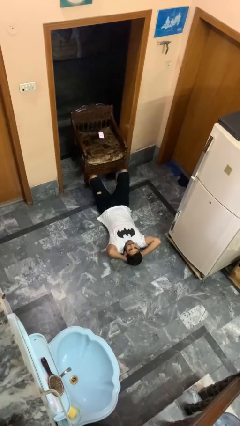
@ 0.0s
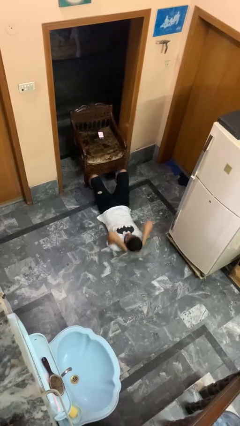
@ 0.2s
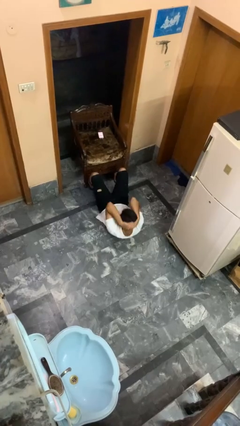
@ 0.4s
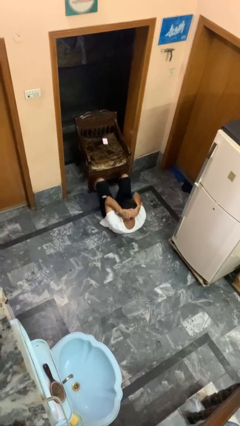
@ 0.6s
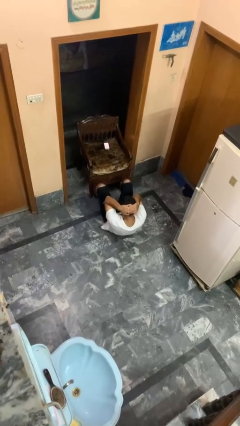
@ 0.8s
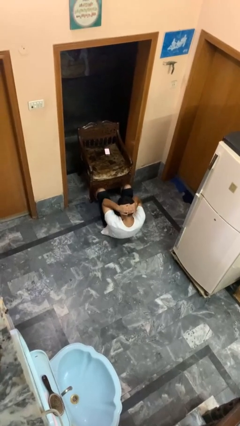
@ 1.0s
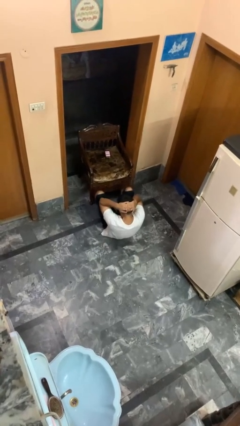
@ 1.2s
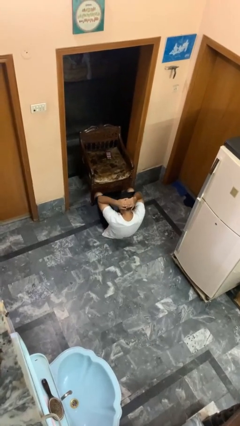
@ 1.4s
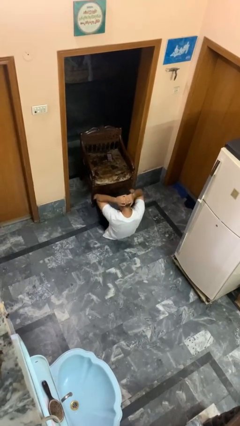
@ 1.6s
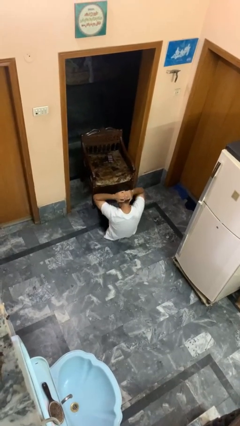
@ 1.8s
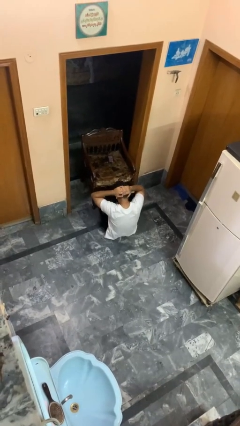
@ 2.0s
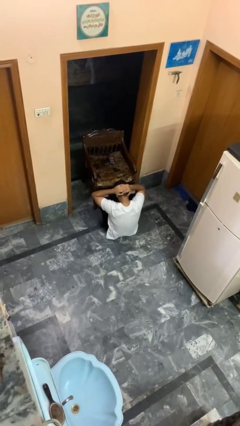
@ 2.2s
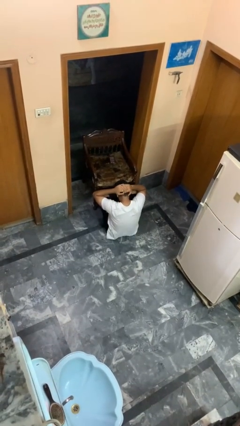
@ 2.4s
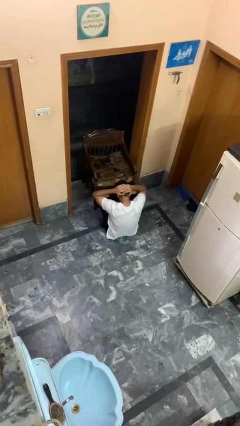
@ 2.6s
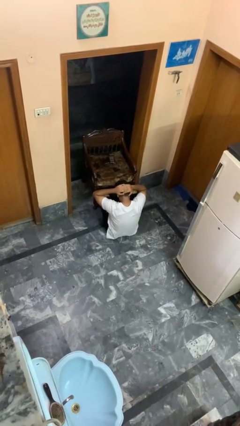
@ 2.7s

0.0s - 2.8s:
person exercises with situp

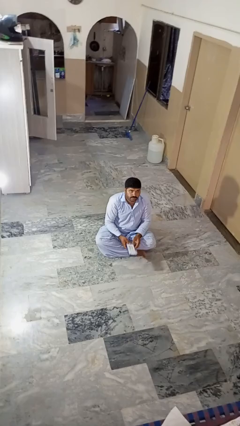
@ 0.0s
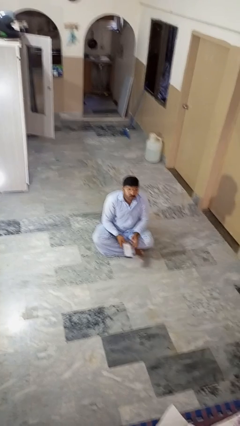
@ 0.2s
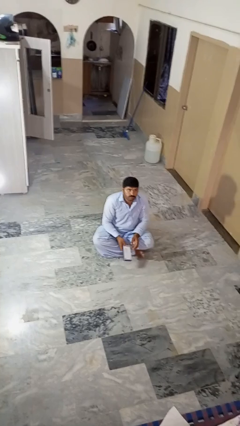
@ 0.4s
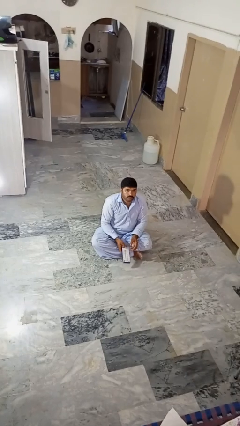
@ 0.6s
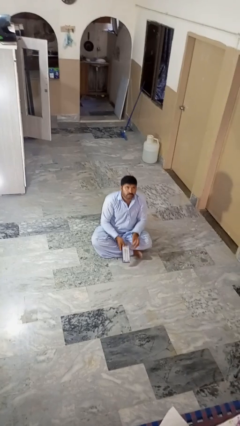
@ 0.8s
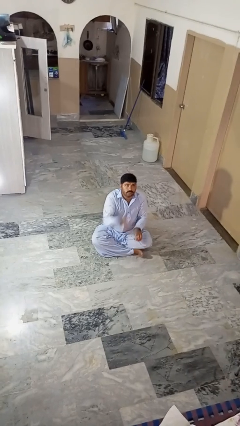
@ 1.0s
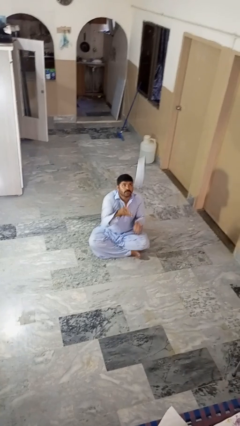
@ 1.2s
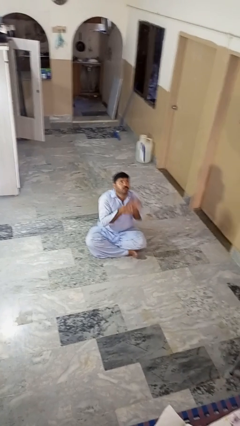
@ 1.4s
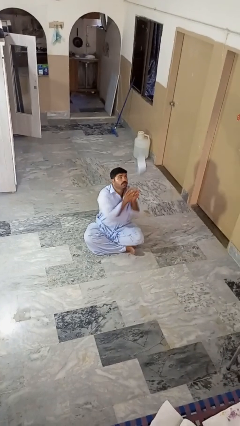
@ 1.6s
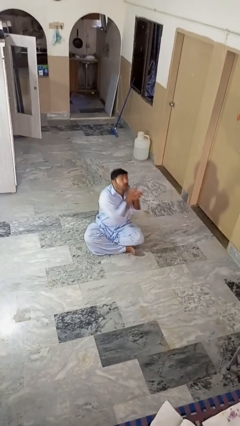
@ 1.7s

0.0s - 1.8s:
person drops object

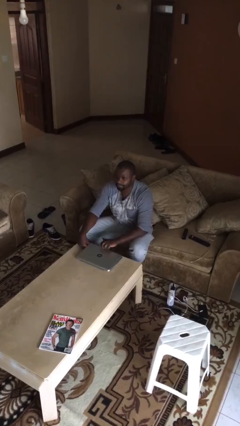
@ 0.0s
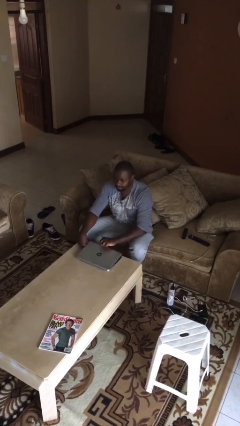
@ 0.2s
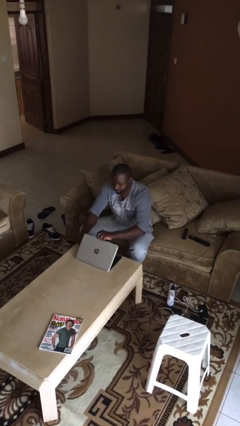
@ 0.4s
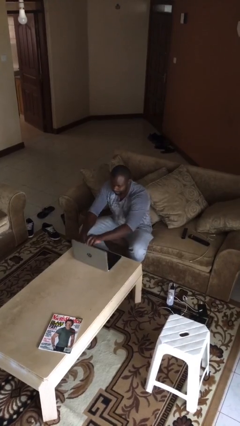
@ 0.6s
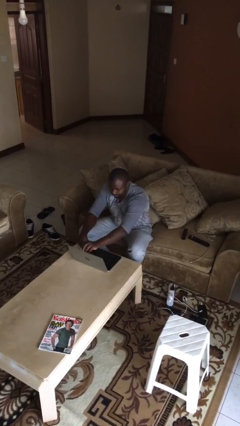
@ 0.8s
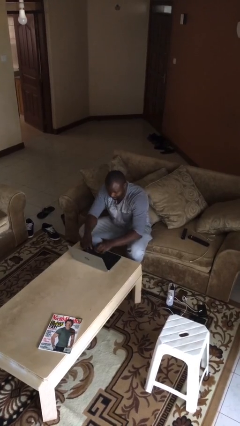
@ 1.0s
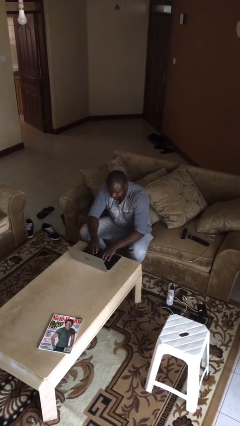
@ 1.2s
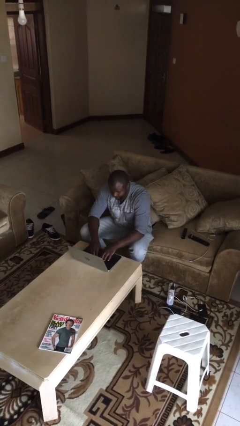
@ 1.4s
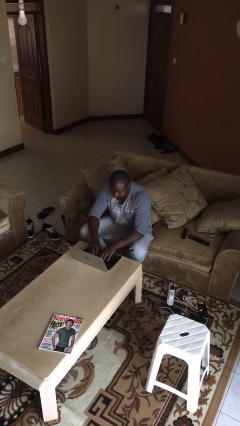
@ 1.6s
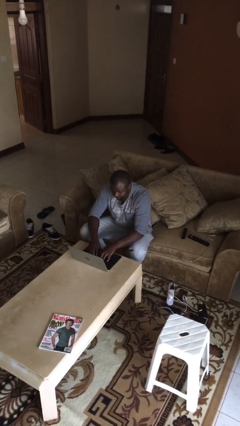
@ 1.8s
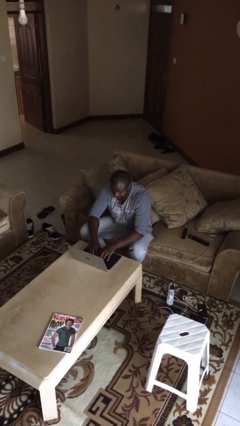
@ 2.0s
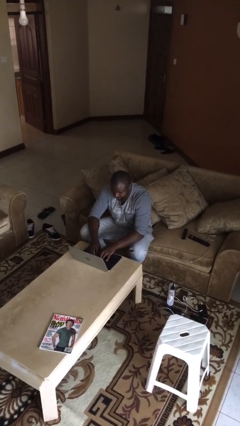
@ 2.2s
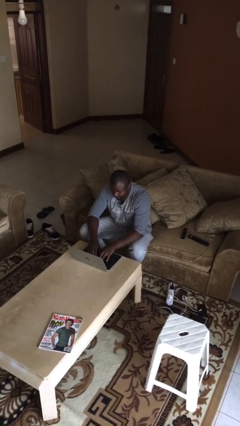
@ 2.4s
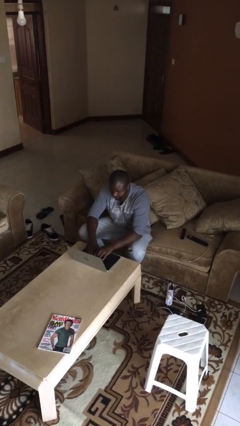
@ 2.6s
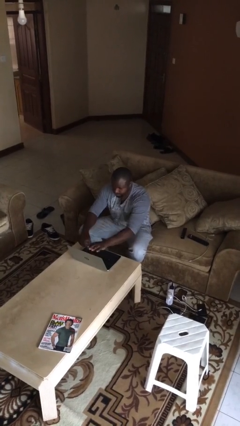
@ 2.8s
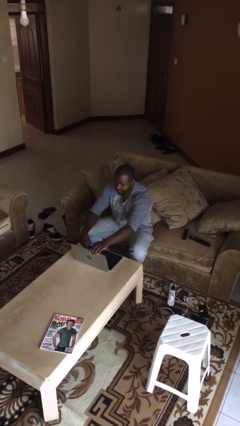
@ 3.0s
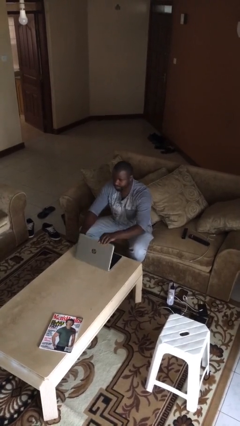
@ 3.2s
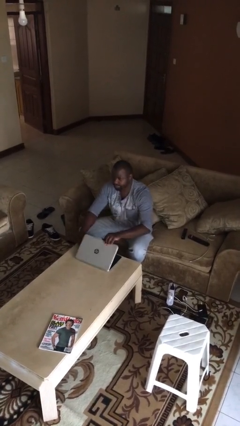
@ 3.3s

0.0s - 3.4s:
person interacts with laptop

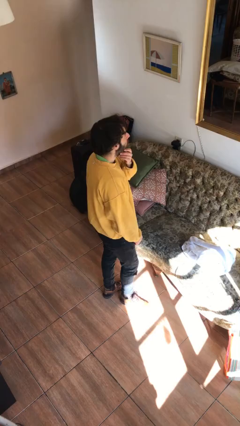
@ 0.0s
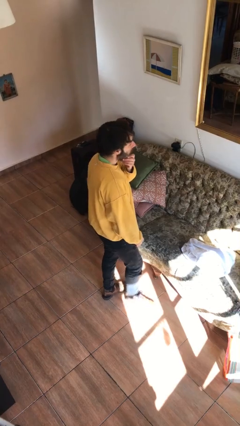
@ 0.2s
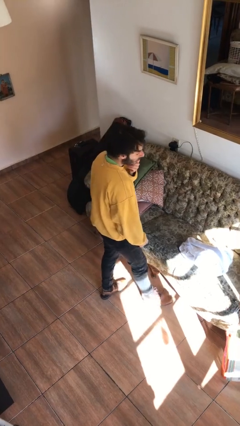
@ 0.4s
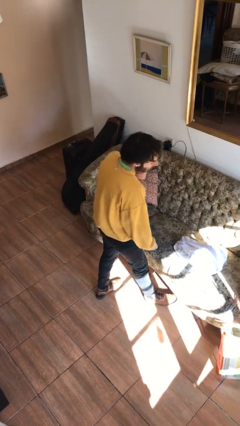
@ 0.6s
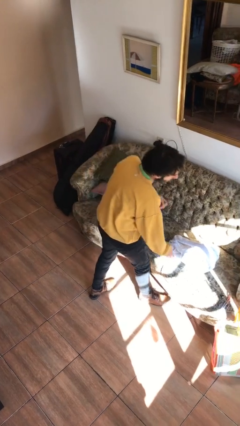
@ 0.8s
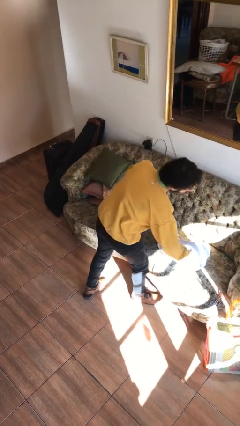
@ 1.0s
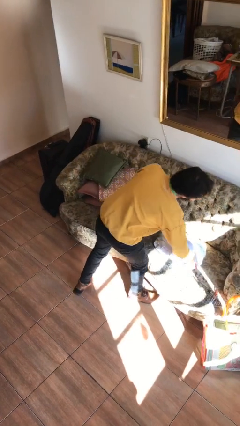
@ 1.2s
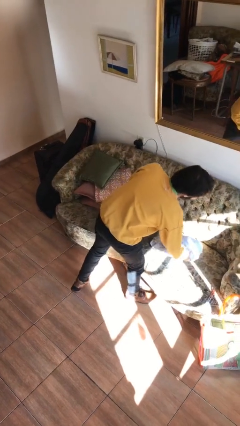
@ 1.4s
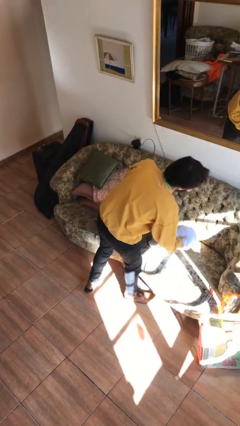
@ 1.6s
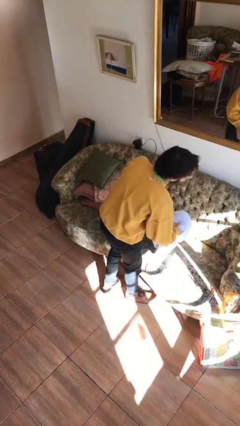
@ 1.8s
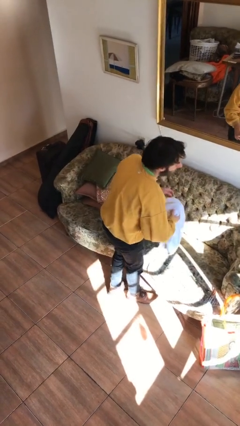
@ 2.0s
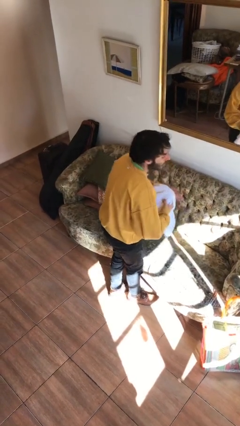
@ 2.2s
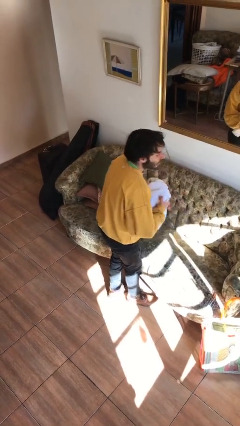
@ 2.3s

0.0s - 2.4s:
person picks up object from couch

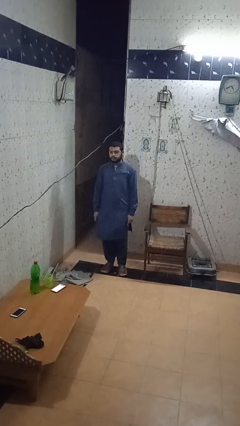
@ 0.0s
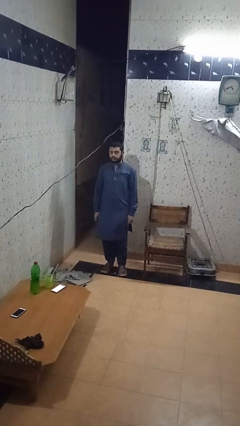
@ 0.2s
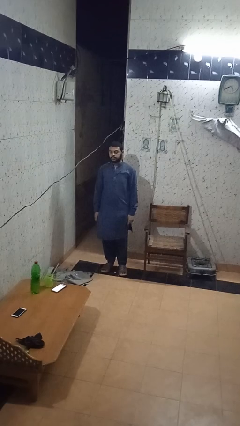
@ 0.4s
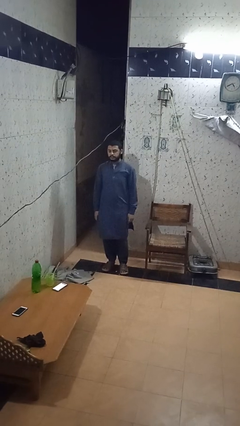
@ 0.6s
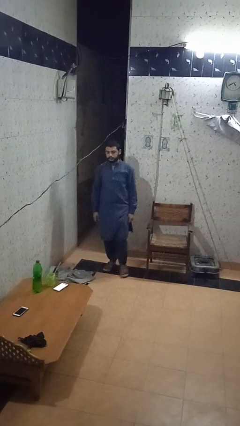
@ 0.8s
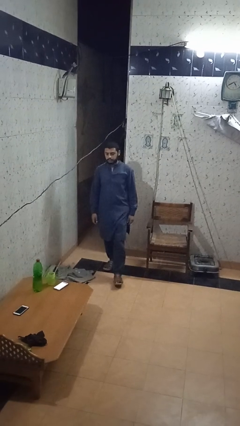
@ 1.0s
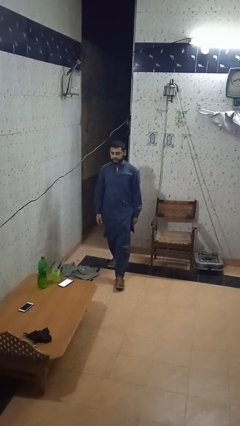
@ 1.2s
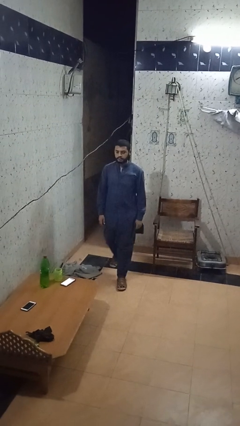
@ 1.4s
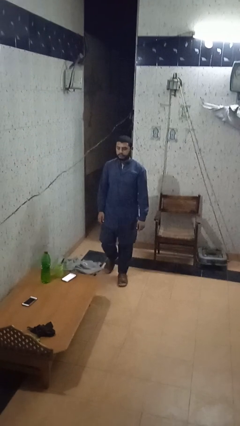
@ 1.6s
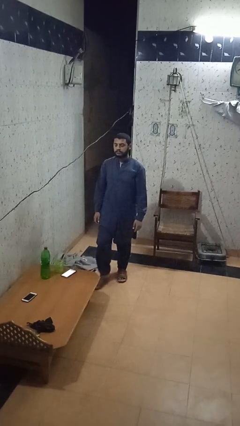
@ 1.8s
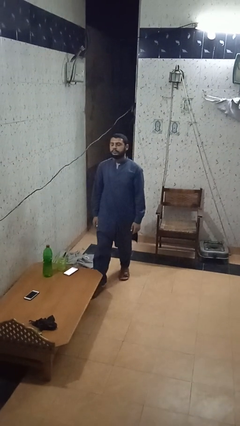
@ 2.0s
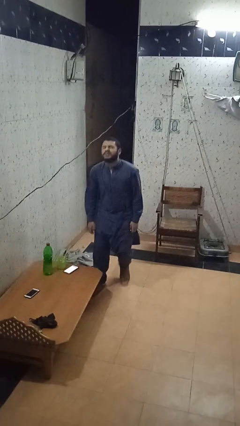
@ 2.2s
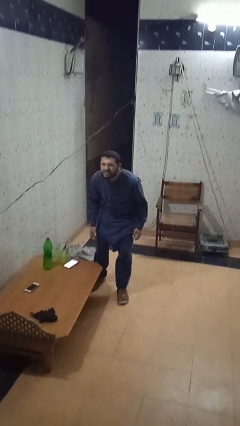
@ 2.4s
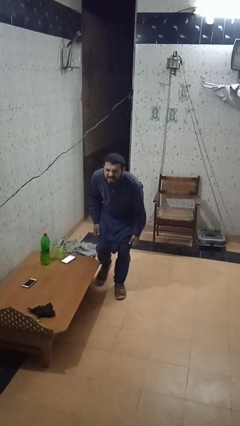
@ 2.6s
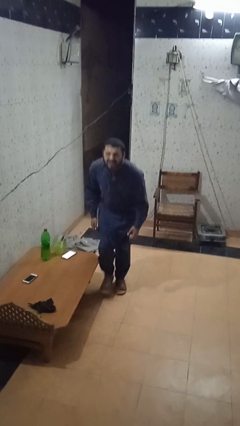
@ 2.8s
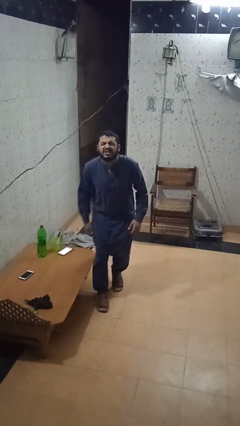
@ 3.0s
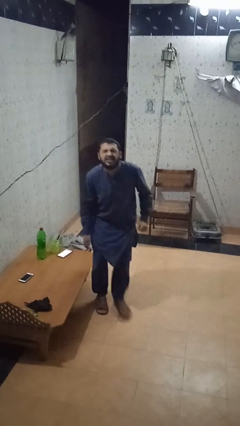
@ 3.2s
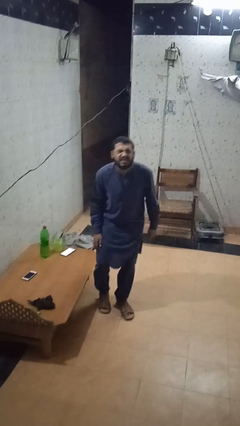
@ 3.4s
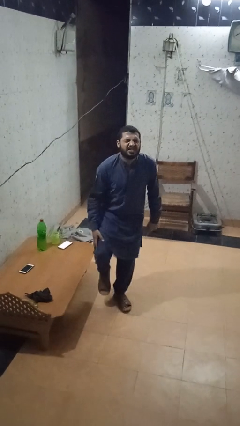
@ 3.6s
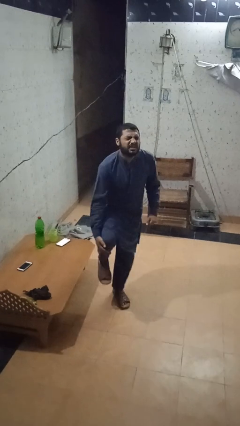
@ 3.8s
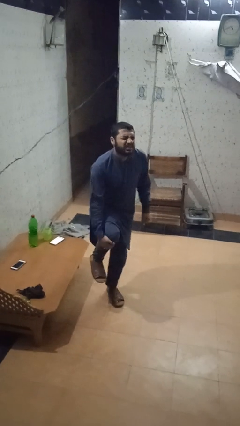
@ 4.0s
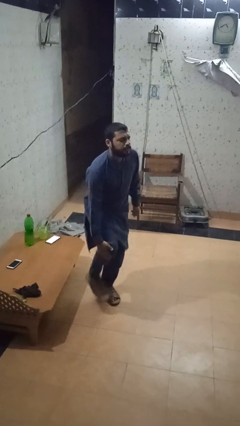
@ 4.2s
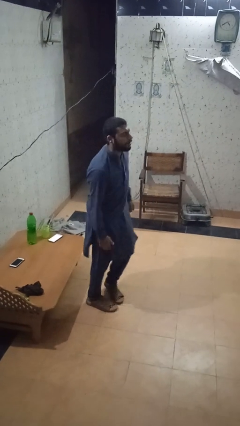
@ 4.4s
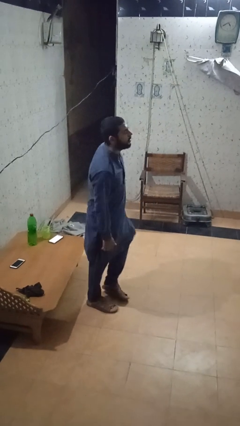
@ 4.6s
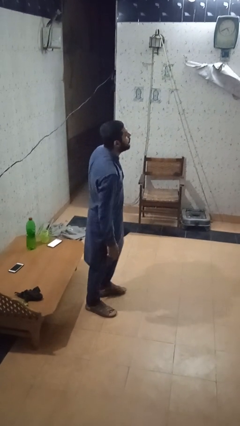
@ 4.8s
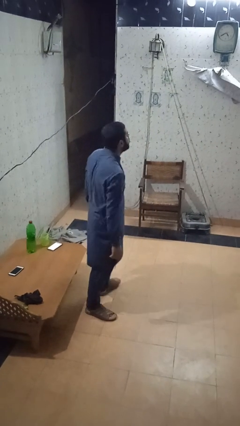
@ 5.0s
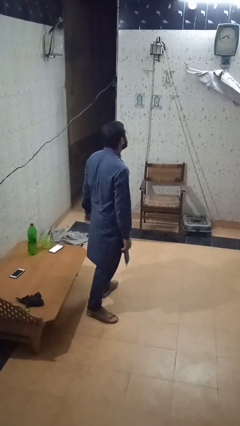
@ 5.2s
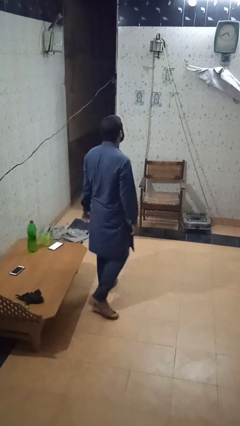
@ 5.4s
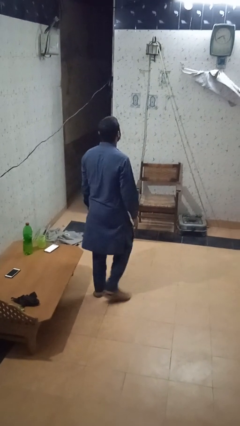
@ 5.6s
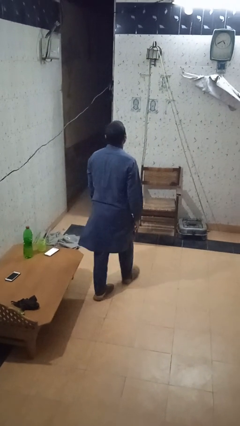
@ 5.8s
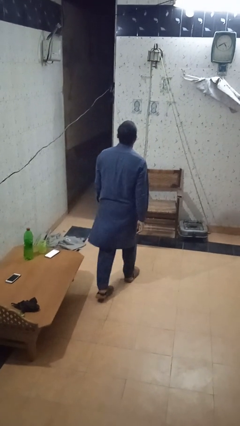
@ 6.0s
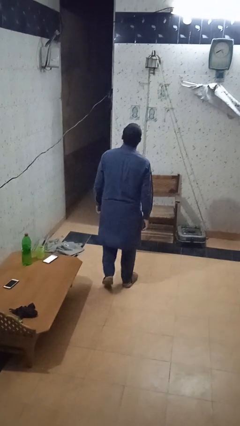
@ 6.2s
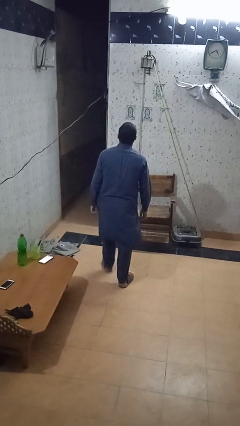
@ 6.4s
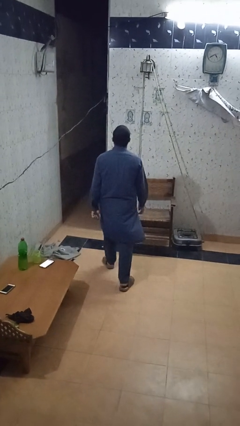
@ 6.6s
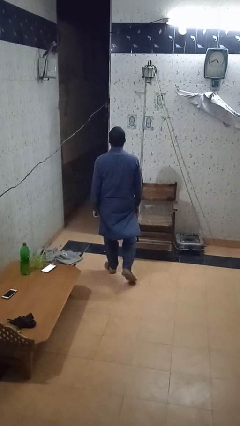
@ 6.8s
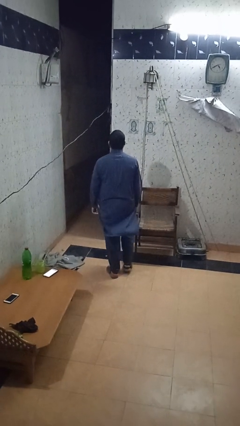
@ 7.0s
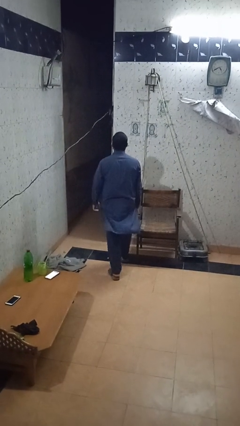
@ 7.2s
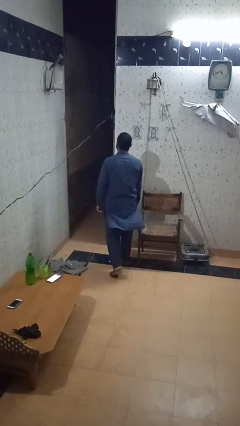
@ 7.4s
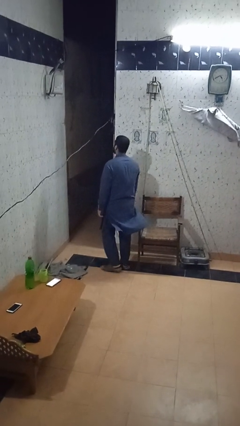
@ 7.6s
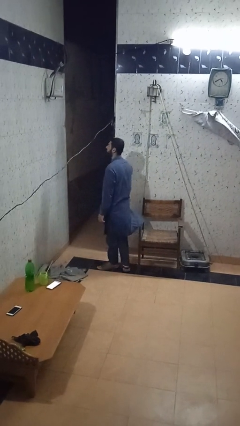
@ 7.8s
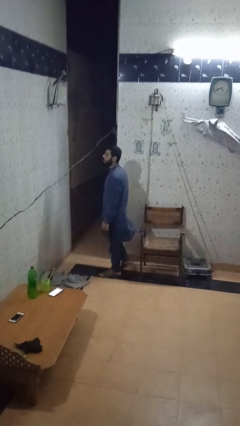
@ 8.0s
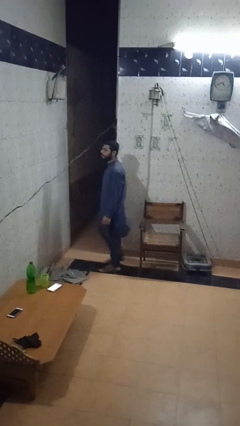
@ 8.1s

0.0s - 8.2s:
person bumps into table
